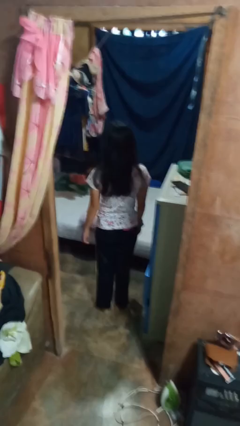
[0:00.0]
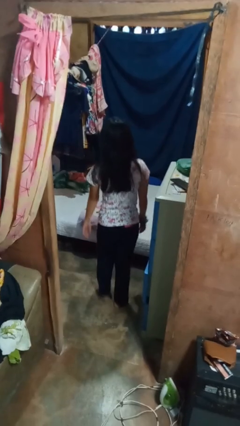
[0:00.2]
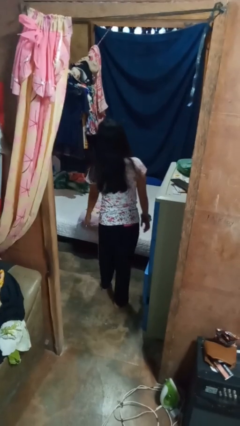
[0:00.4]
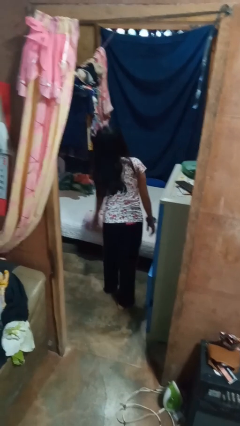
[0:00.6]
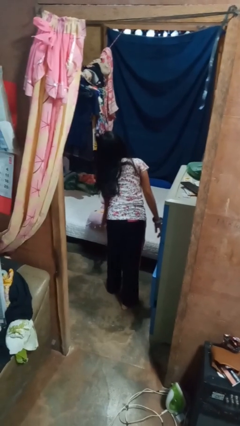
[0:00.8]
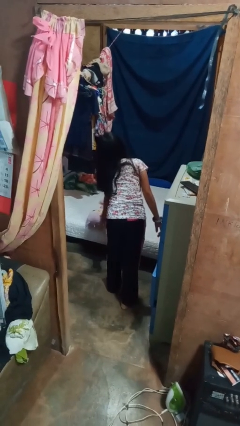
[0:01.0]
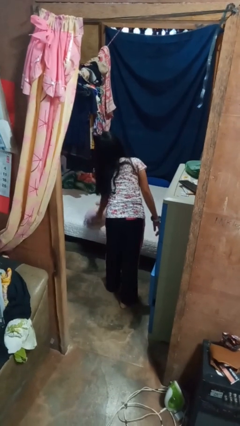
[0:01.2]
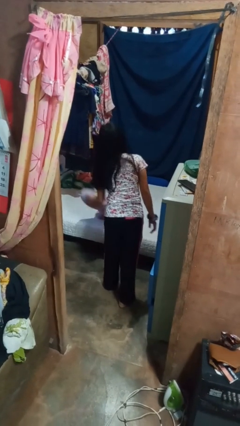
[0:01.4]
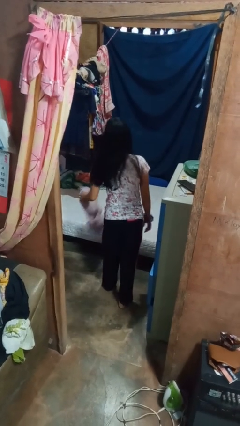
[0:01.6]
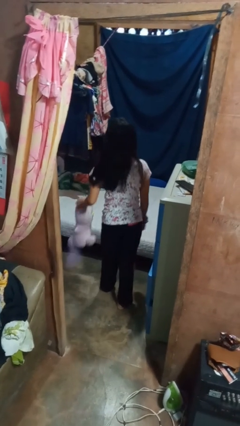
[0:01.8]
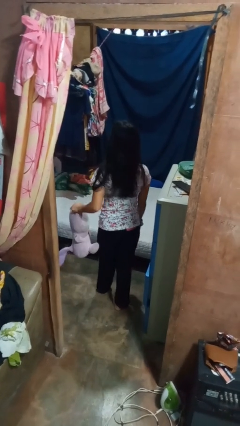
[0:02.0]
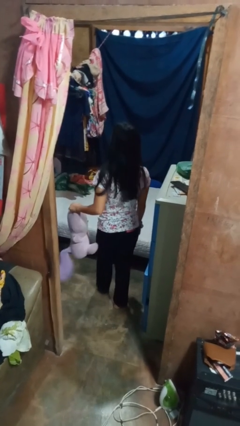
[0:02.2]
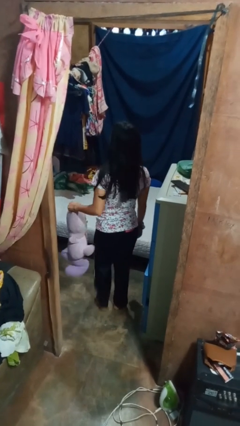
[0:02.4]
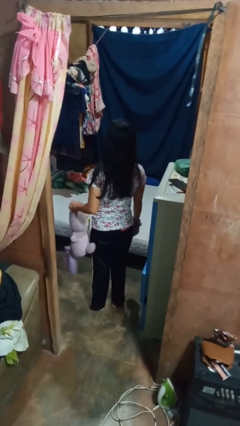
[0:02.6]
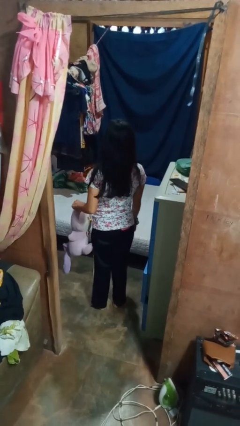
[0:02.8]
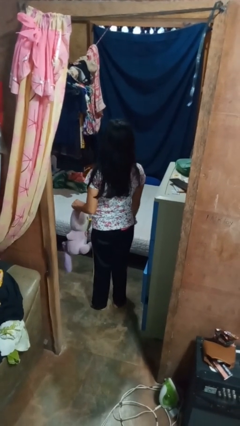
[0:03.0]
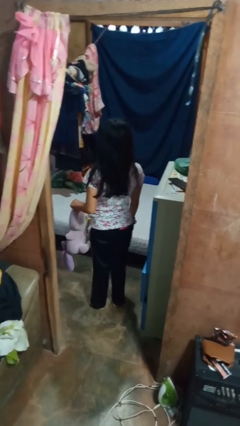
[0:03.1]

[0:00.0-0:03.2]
person picks up object from bed

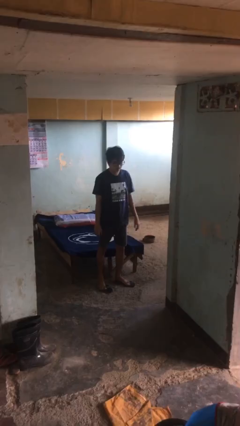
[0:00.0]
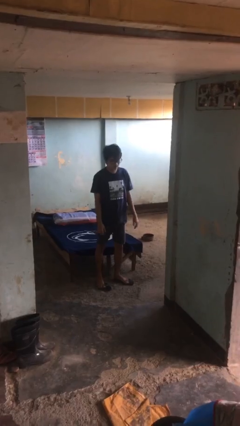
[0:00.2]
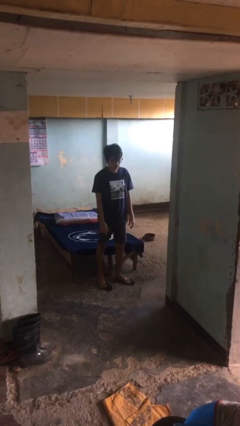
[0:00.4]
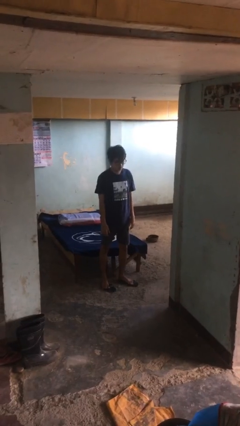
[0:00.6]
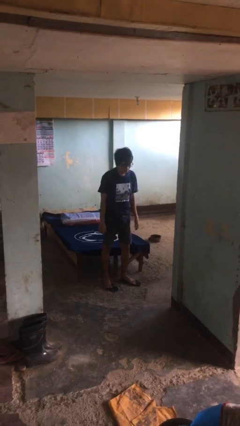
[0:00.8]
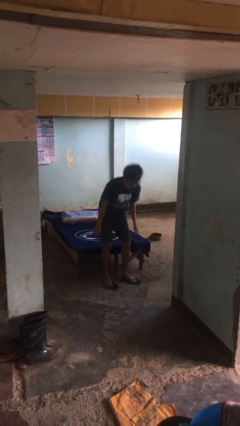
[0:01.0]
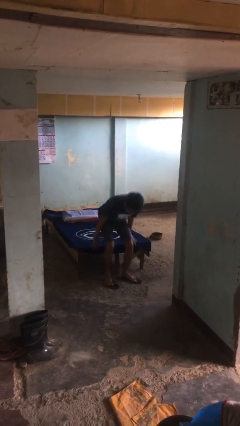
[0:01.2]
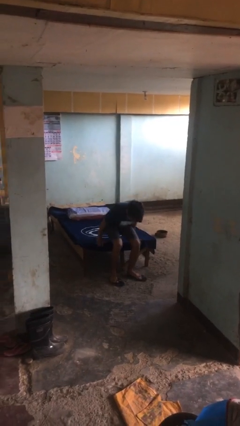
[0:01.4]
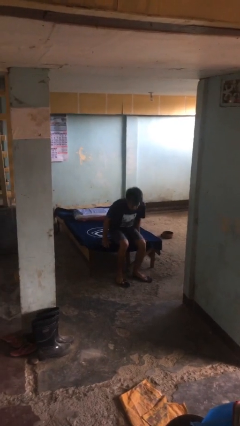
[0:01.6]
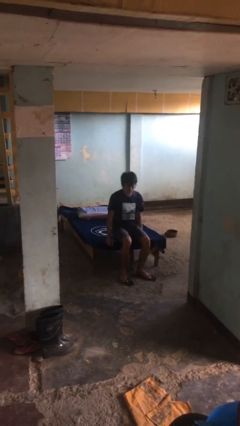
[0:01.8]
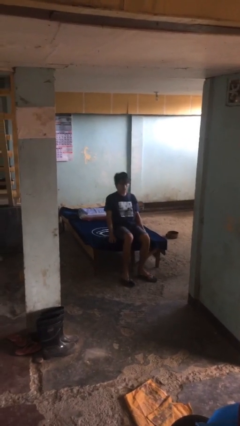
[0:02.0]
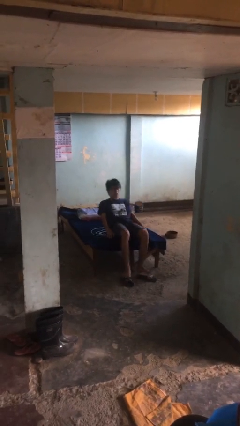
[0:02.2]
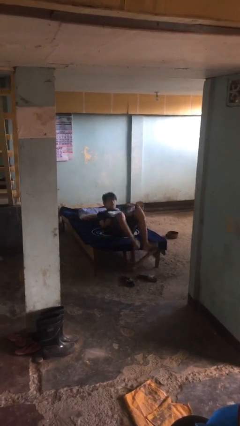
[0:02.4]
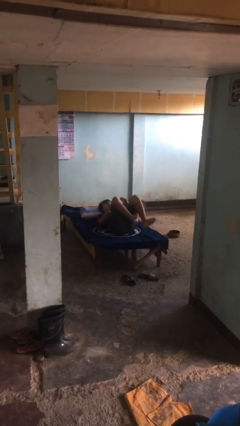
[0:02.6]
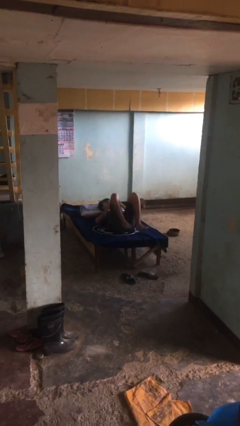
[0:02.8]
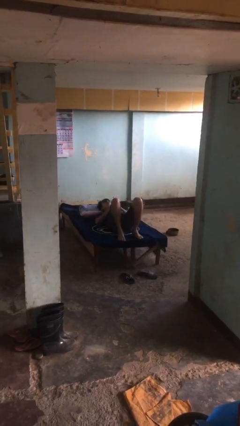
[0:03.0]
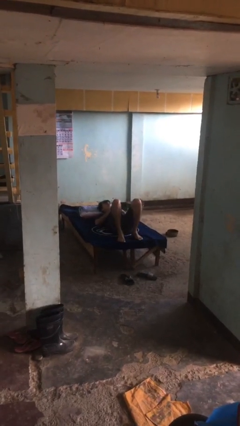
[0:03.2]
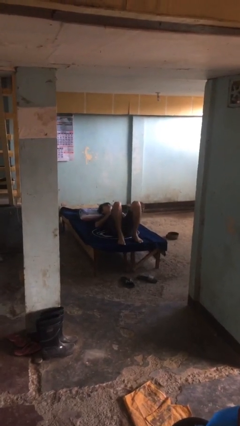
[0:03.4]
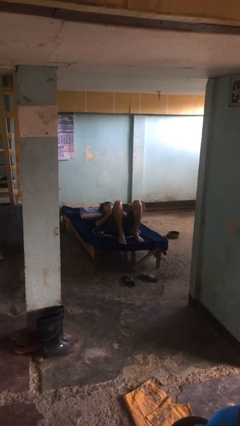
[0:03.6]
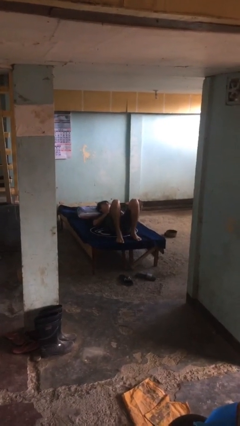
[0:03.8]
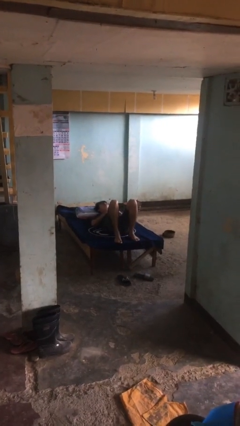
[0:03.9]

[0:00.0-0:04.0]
person lies down on bed

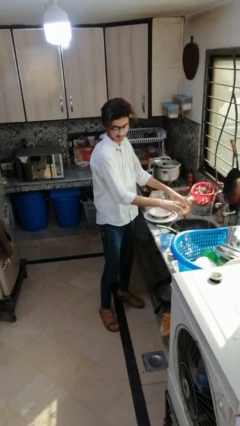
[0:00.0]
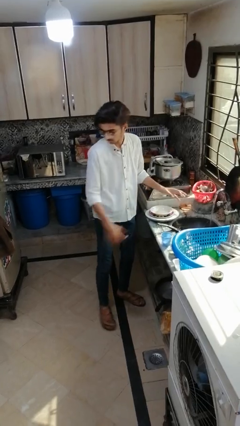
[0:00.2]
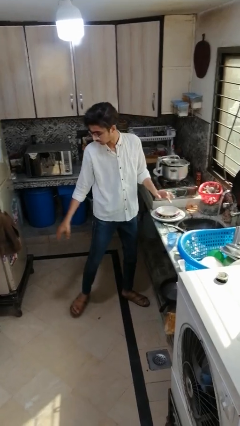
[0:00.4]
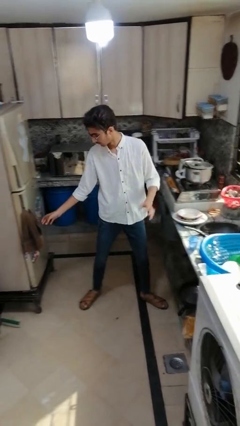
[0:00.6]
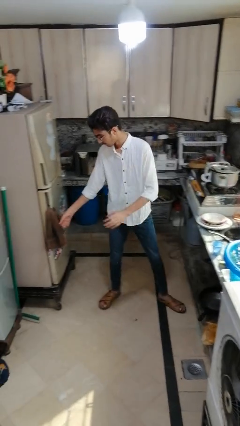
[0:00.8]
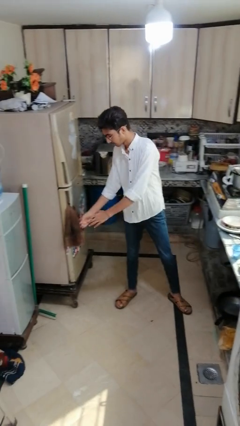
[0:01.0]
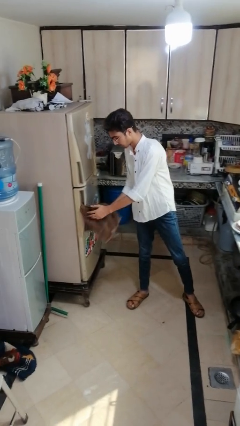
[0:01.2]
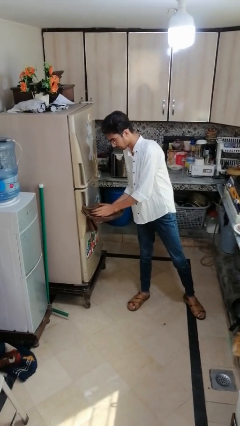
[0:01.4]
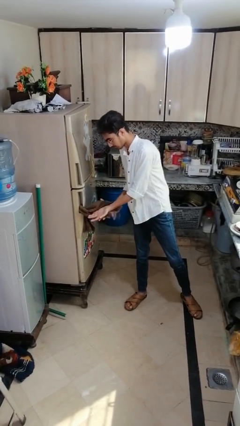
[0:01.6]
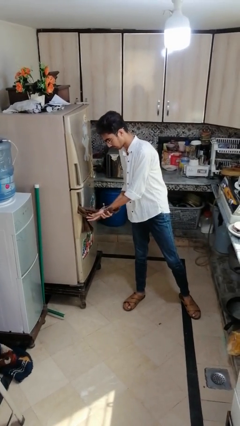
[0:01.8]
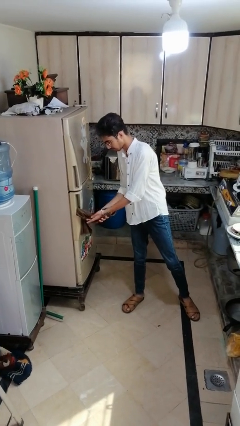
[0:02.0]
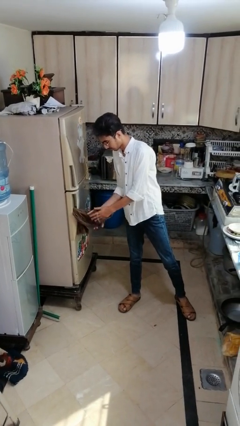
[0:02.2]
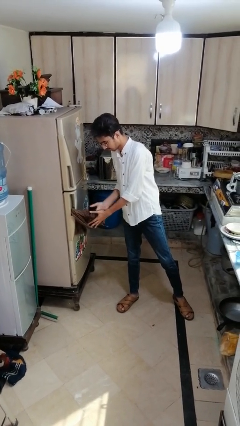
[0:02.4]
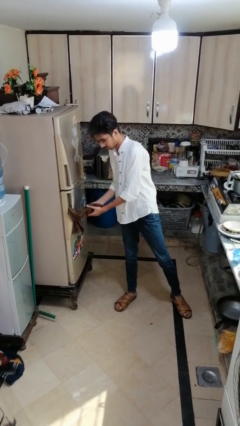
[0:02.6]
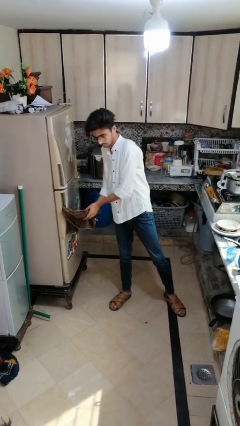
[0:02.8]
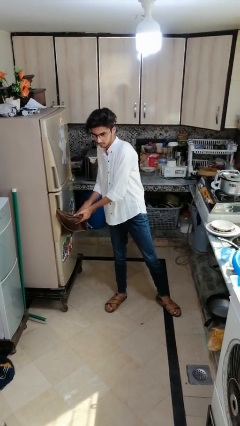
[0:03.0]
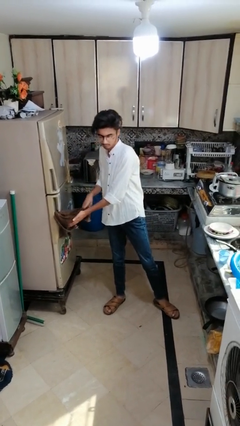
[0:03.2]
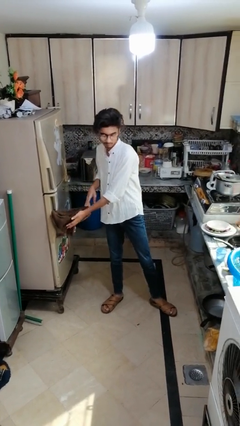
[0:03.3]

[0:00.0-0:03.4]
person dries hands with towel

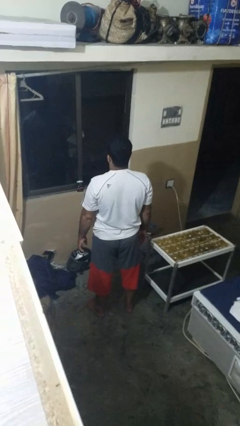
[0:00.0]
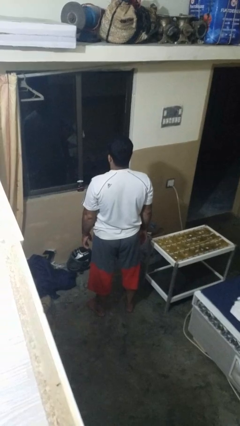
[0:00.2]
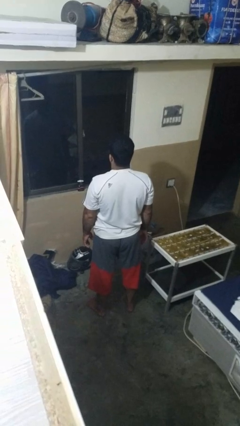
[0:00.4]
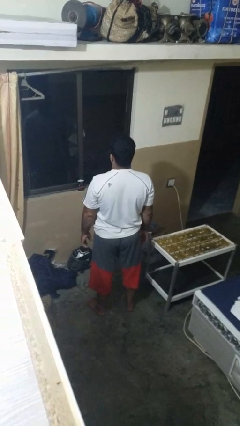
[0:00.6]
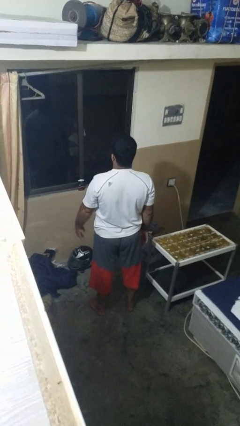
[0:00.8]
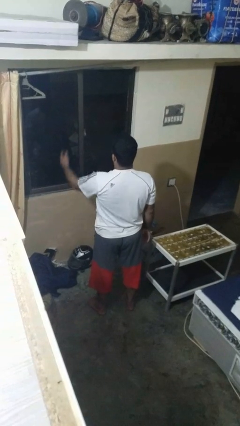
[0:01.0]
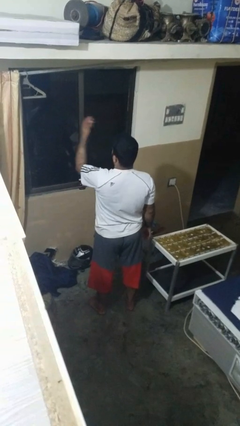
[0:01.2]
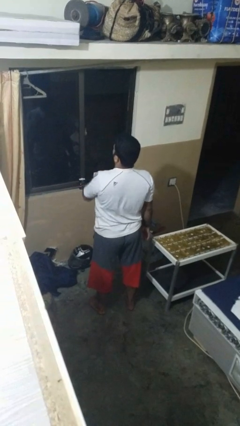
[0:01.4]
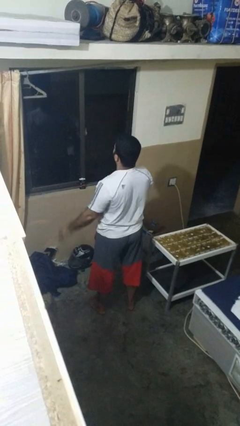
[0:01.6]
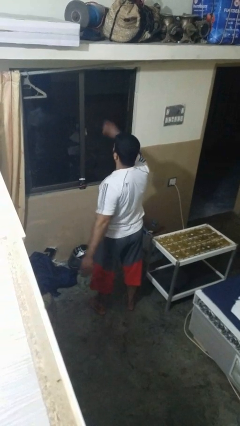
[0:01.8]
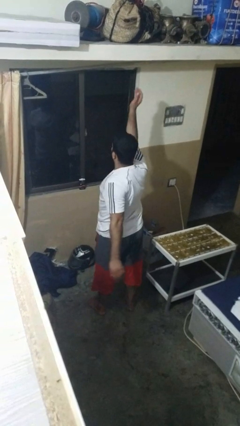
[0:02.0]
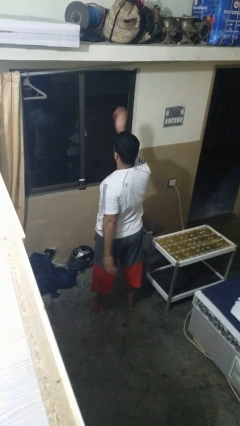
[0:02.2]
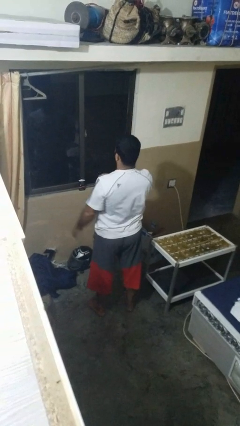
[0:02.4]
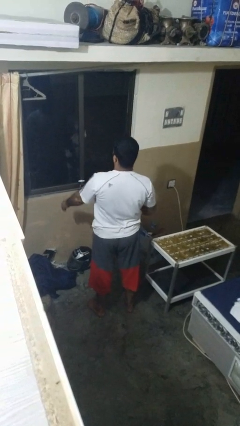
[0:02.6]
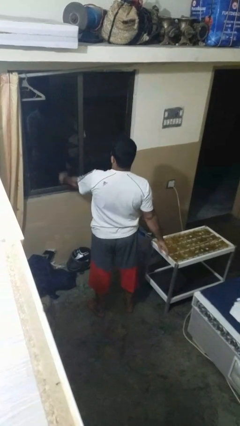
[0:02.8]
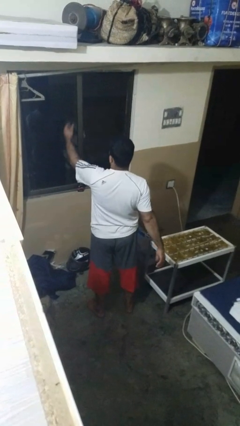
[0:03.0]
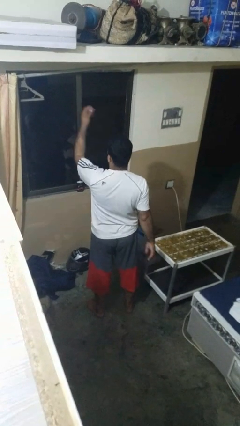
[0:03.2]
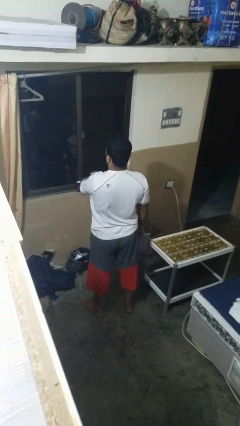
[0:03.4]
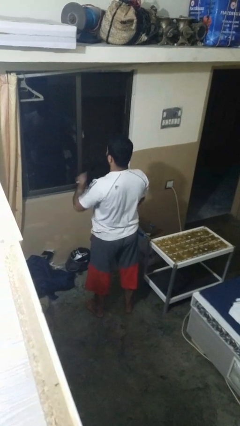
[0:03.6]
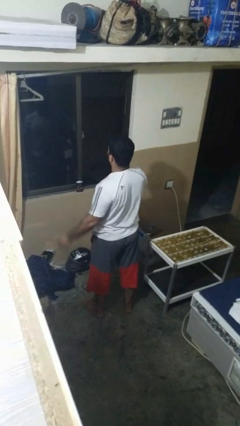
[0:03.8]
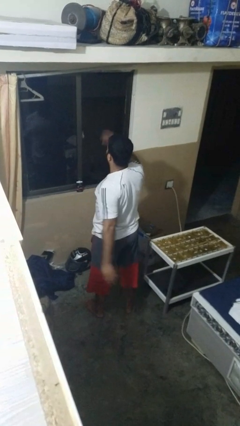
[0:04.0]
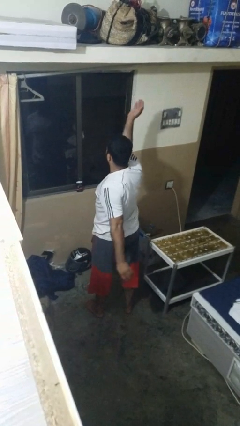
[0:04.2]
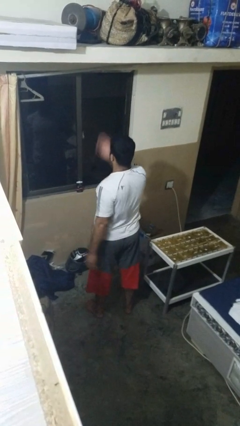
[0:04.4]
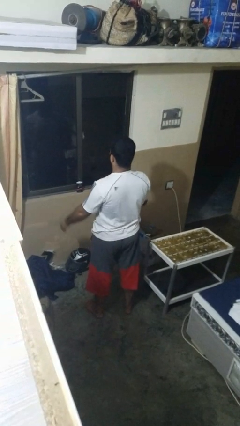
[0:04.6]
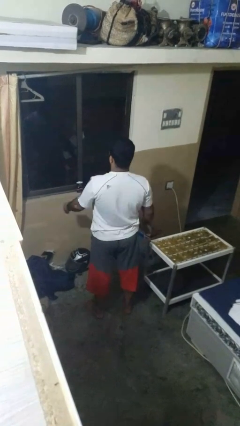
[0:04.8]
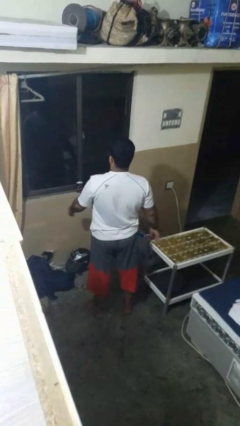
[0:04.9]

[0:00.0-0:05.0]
person drums on chest

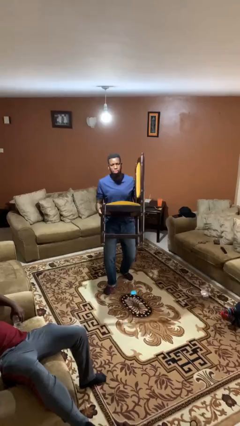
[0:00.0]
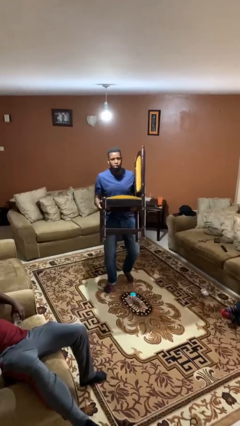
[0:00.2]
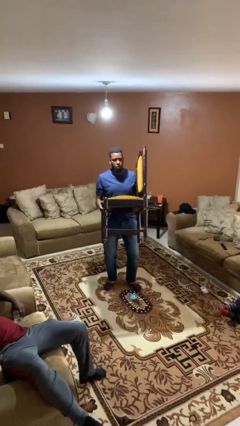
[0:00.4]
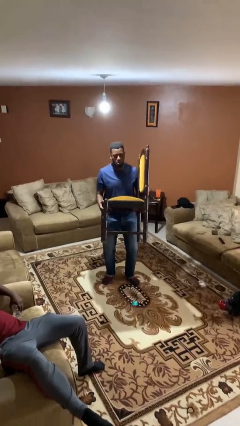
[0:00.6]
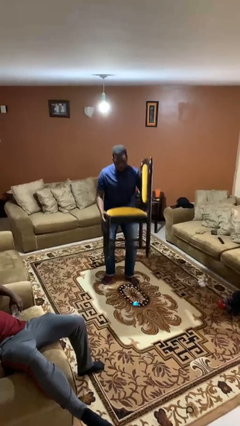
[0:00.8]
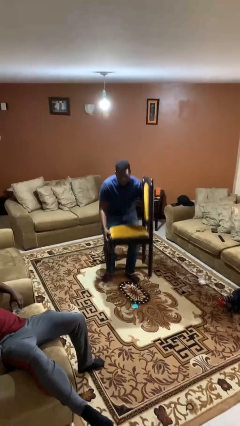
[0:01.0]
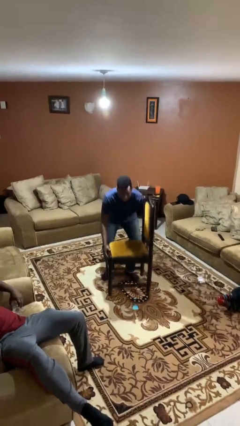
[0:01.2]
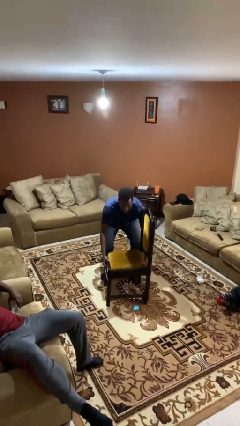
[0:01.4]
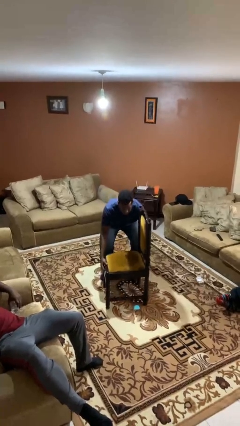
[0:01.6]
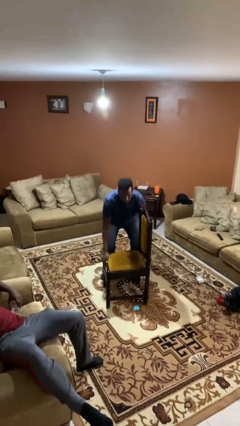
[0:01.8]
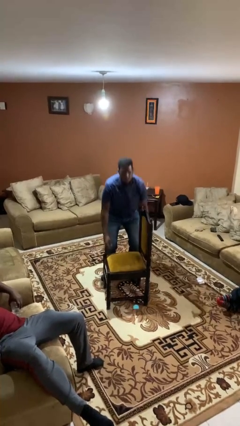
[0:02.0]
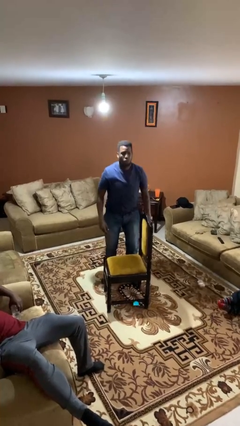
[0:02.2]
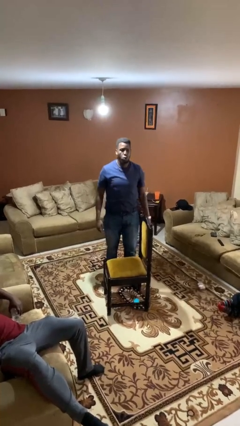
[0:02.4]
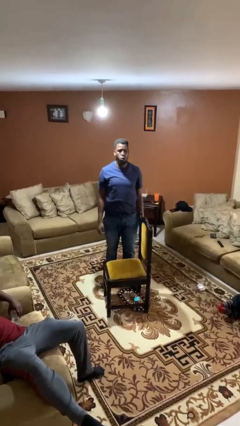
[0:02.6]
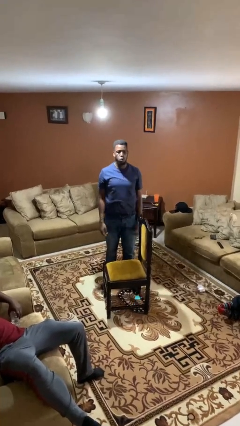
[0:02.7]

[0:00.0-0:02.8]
person puts down object on floor
